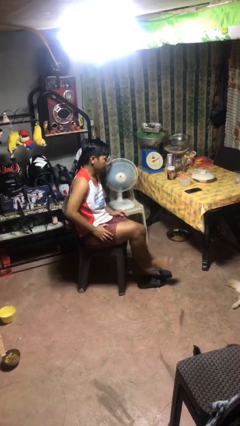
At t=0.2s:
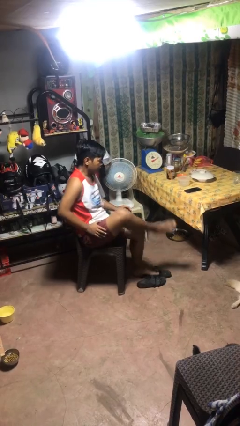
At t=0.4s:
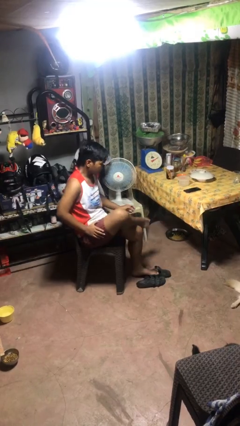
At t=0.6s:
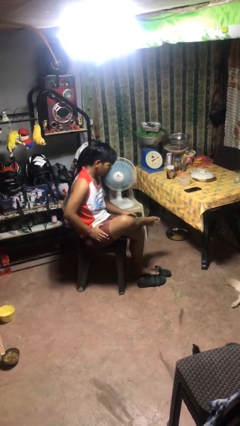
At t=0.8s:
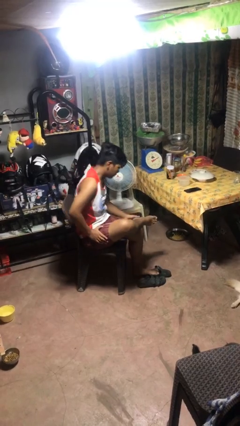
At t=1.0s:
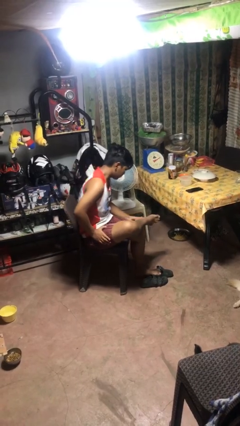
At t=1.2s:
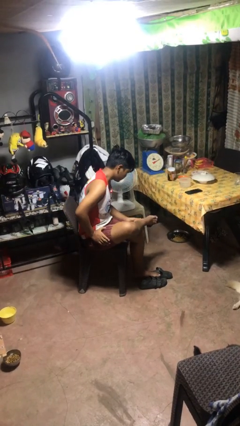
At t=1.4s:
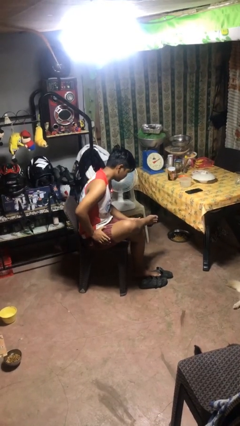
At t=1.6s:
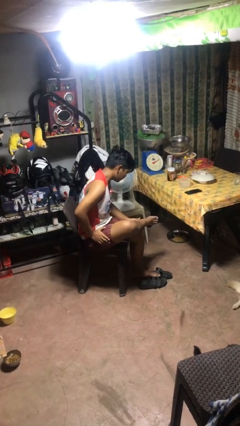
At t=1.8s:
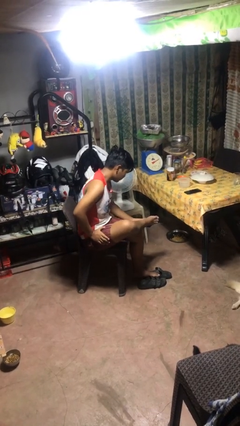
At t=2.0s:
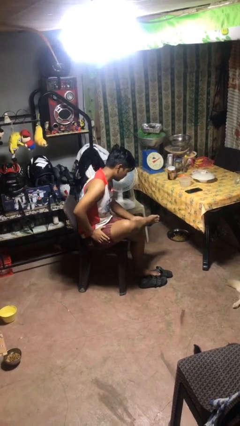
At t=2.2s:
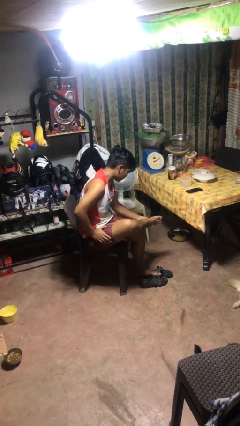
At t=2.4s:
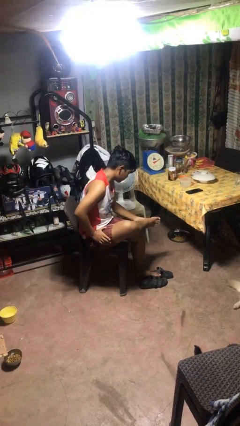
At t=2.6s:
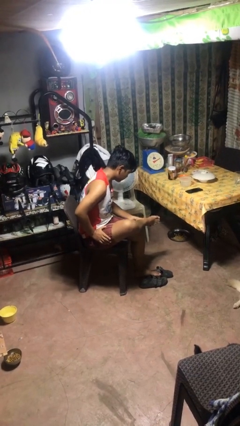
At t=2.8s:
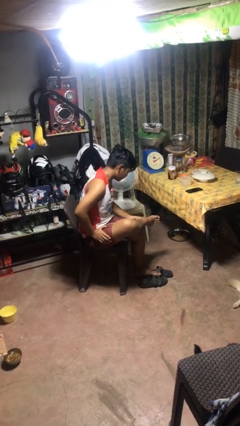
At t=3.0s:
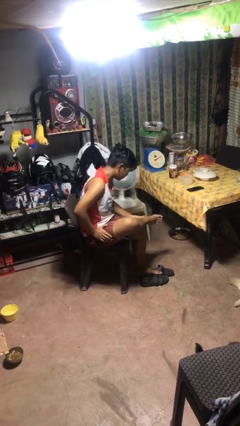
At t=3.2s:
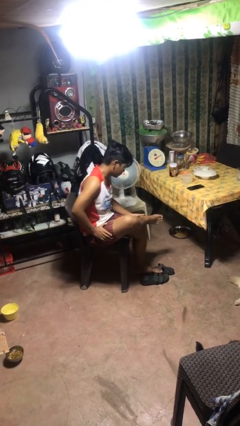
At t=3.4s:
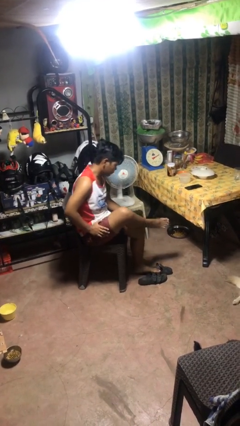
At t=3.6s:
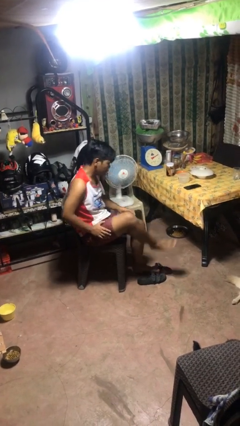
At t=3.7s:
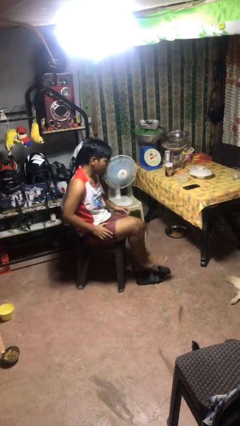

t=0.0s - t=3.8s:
person rubs foot

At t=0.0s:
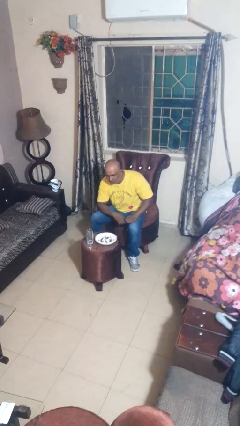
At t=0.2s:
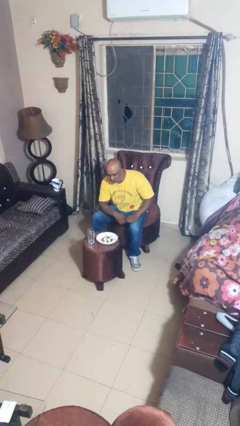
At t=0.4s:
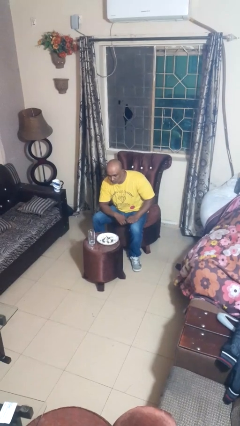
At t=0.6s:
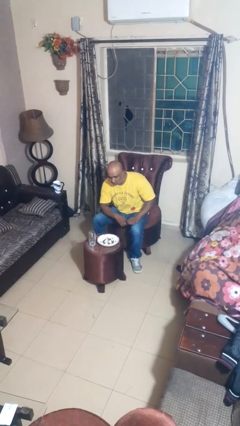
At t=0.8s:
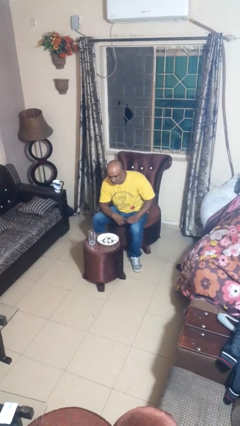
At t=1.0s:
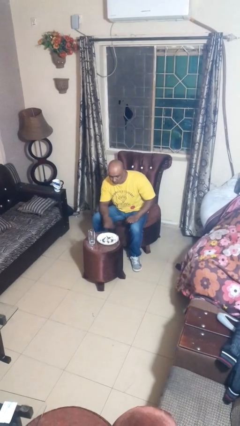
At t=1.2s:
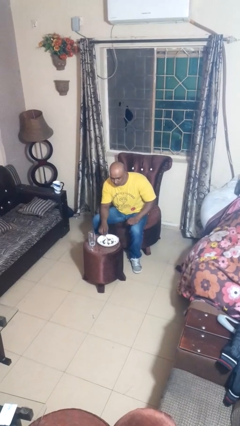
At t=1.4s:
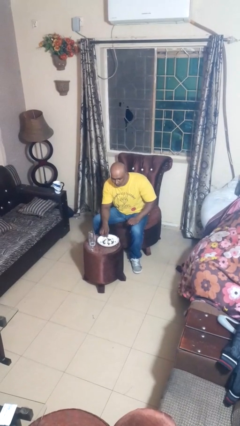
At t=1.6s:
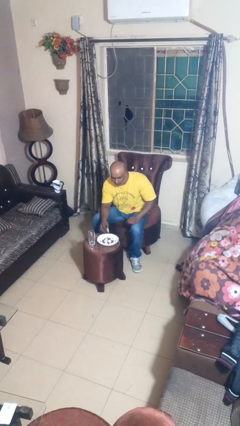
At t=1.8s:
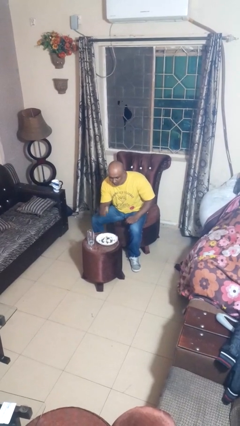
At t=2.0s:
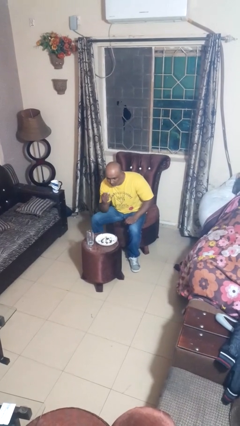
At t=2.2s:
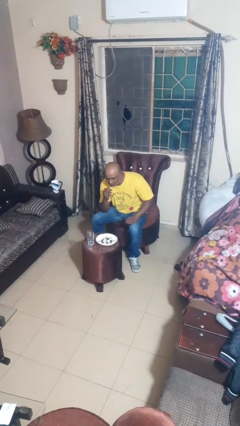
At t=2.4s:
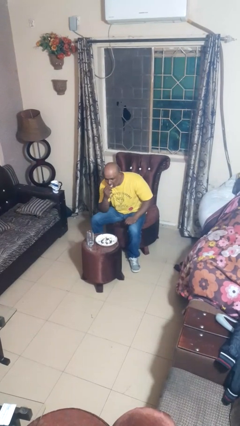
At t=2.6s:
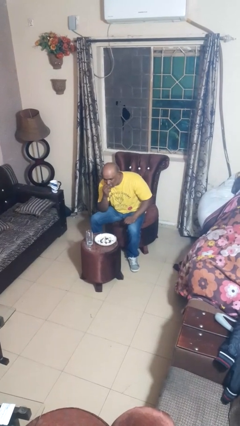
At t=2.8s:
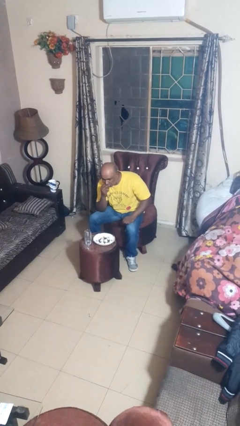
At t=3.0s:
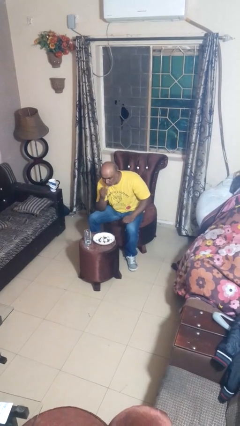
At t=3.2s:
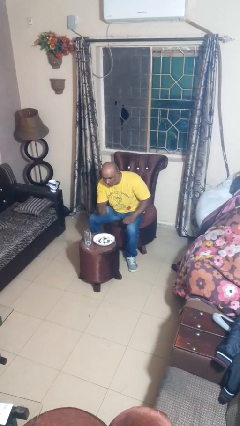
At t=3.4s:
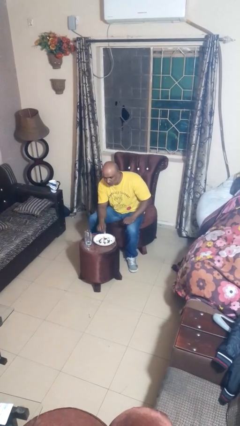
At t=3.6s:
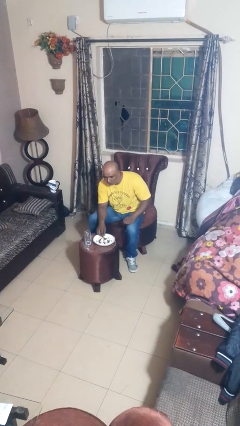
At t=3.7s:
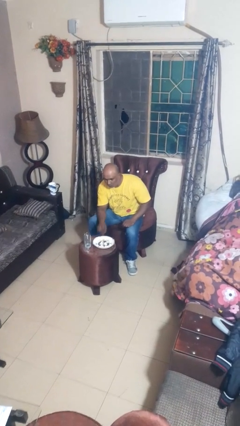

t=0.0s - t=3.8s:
person eats with hands

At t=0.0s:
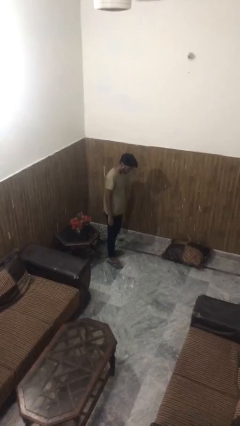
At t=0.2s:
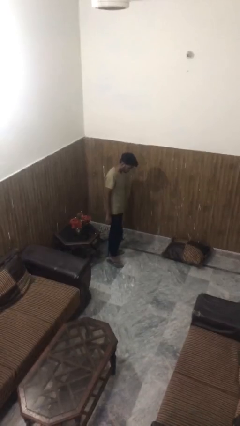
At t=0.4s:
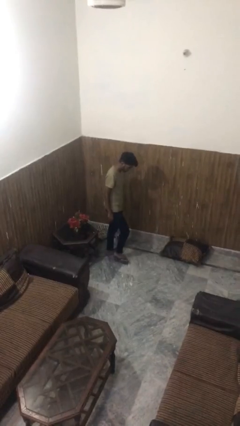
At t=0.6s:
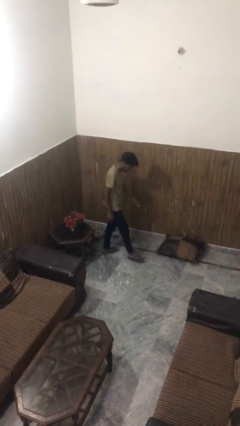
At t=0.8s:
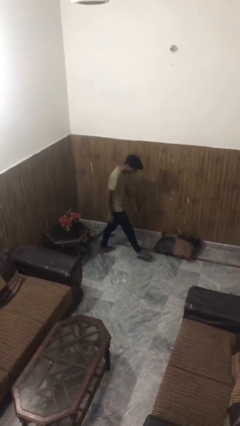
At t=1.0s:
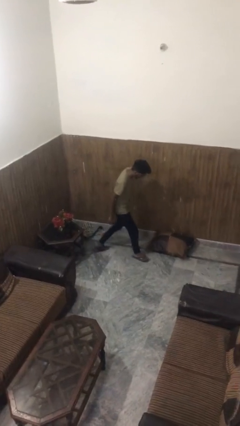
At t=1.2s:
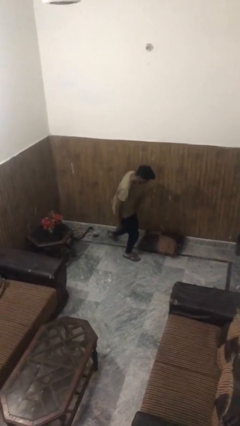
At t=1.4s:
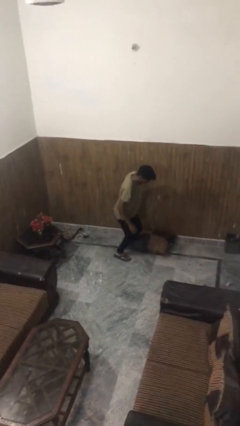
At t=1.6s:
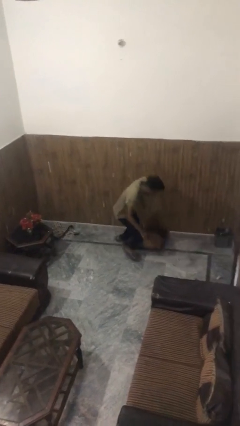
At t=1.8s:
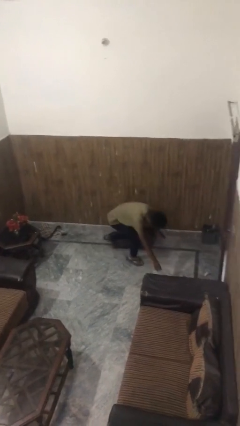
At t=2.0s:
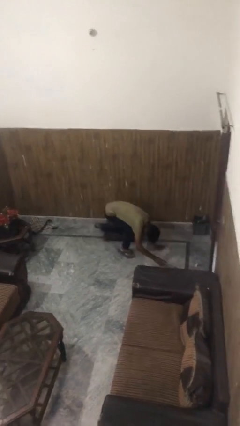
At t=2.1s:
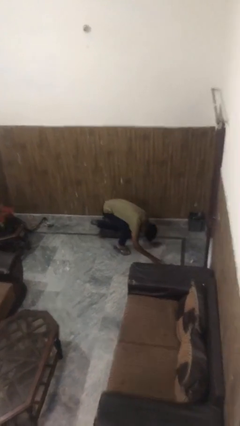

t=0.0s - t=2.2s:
person trips on object on floor

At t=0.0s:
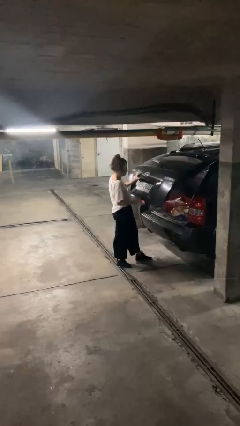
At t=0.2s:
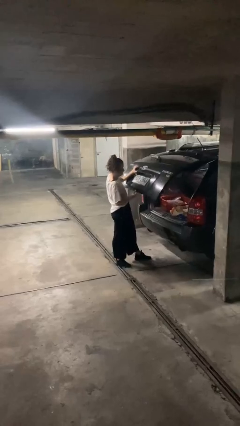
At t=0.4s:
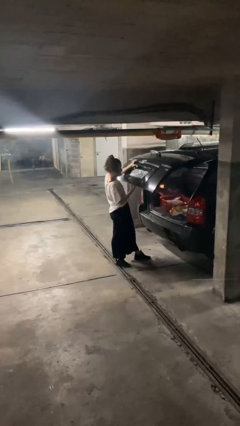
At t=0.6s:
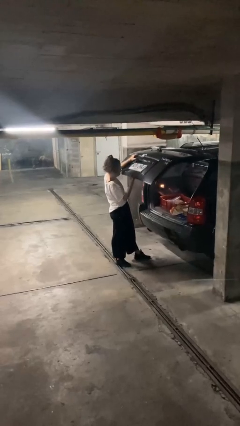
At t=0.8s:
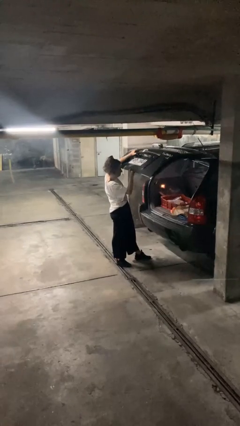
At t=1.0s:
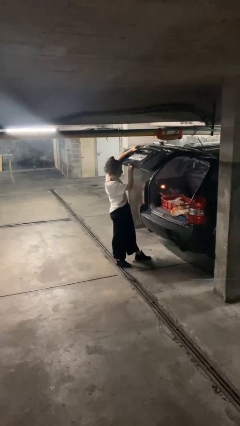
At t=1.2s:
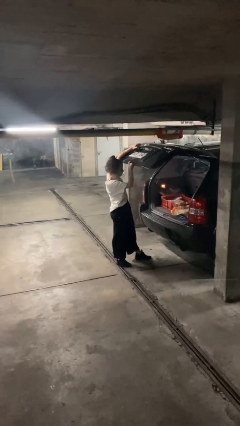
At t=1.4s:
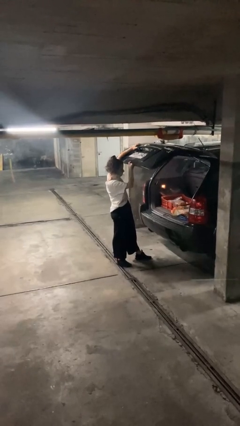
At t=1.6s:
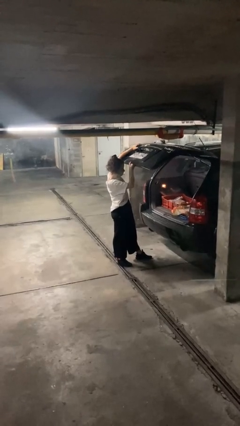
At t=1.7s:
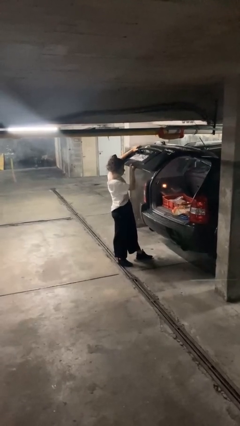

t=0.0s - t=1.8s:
person opens car trunk

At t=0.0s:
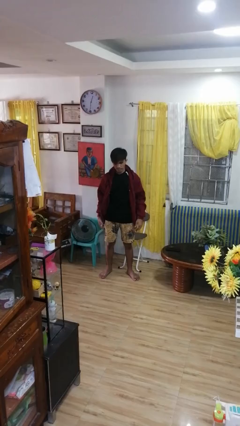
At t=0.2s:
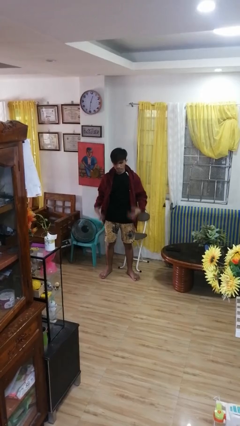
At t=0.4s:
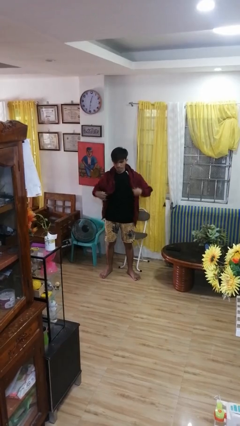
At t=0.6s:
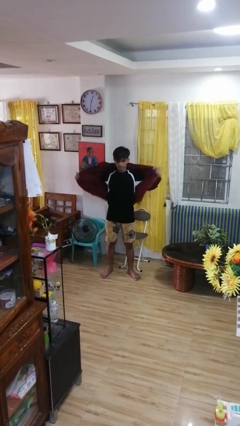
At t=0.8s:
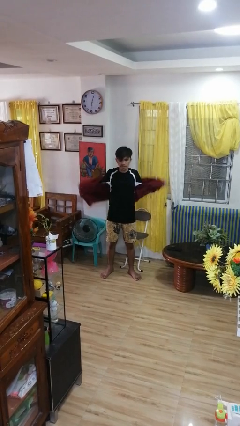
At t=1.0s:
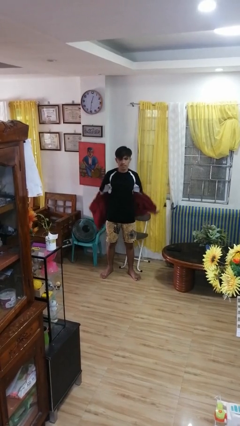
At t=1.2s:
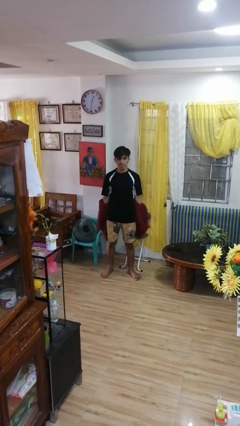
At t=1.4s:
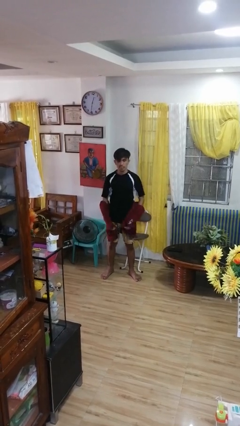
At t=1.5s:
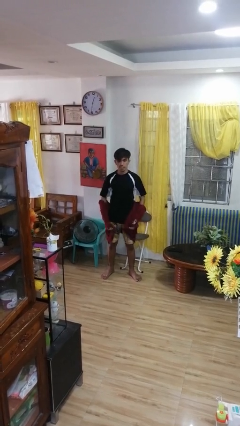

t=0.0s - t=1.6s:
person takes off jacket

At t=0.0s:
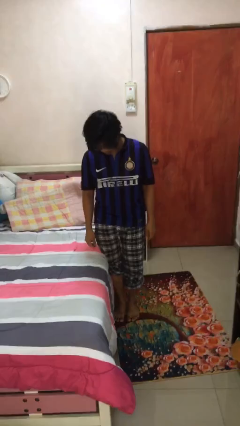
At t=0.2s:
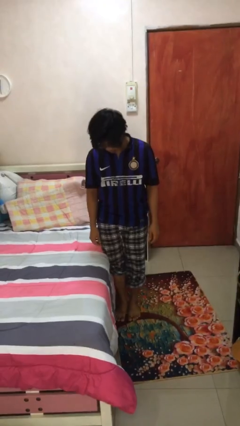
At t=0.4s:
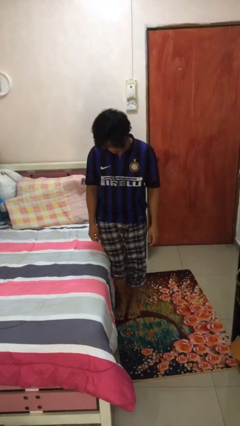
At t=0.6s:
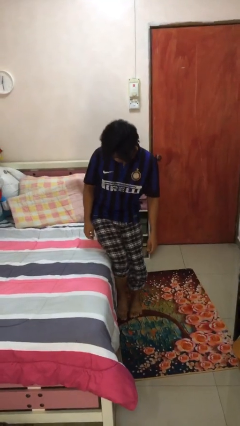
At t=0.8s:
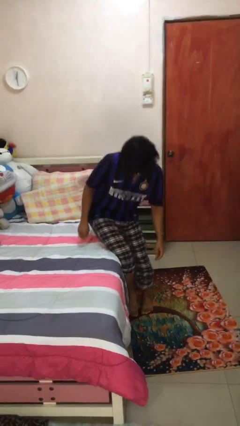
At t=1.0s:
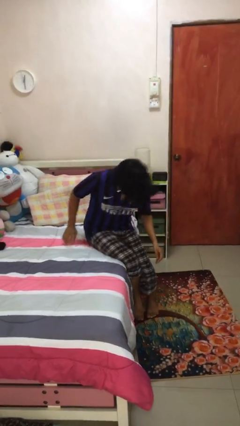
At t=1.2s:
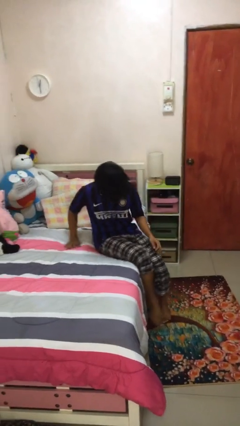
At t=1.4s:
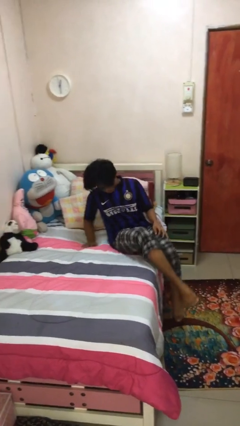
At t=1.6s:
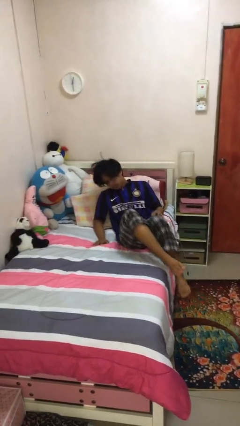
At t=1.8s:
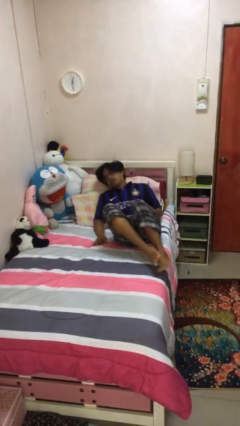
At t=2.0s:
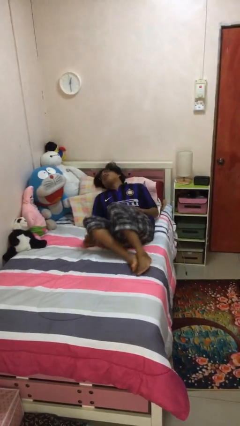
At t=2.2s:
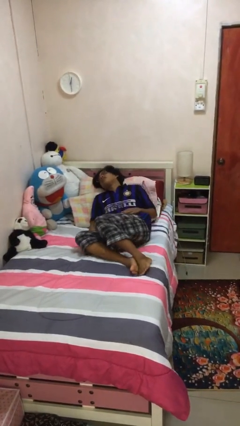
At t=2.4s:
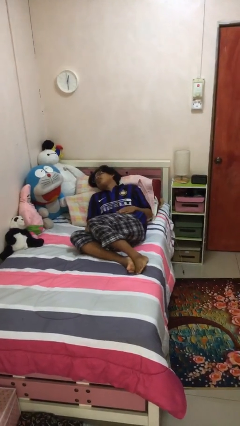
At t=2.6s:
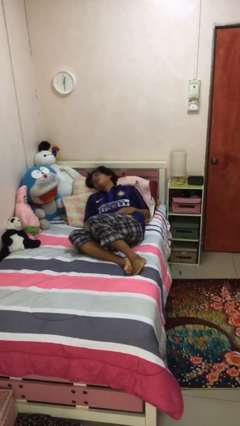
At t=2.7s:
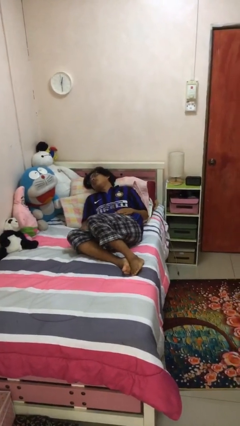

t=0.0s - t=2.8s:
person lies down on bed

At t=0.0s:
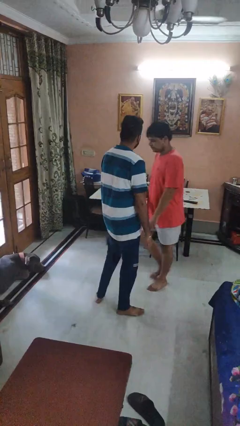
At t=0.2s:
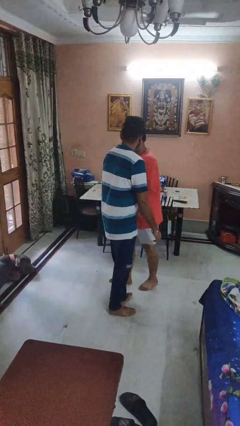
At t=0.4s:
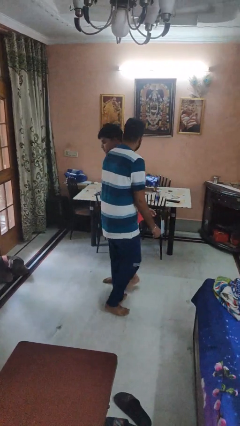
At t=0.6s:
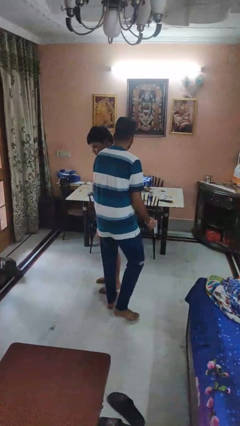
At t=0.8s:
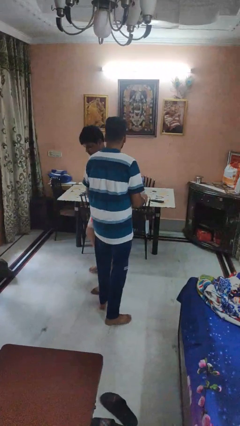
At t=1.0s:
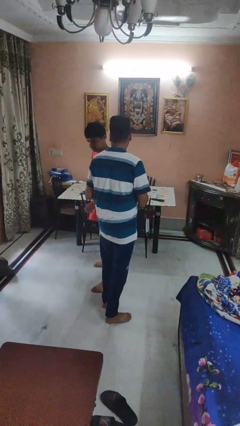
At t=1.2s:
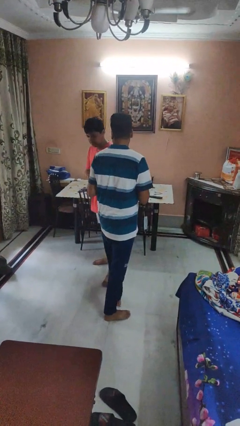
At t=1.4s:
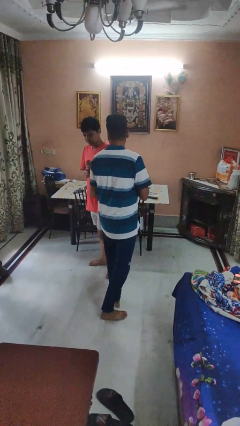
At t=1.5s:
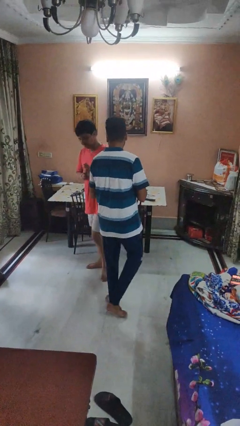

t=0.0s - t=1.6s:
person bumps into person
